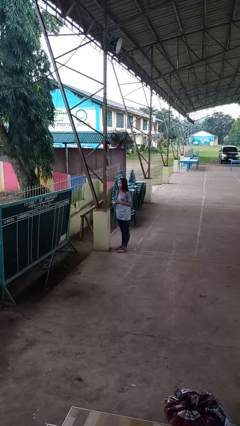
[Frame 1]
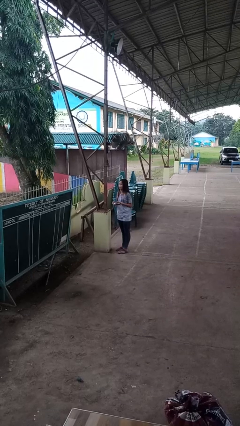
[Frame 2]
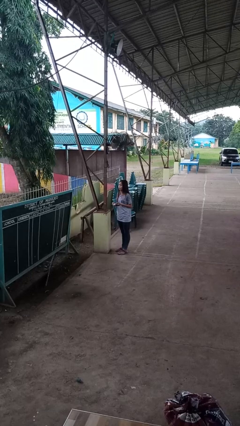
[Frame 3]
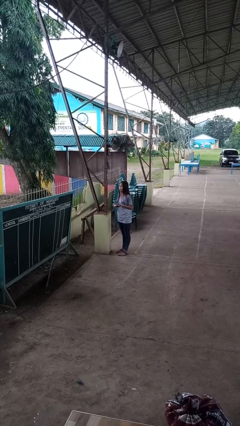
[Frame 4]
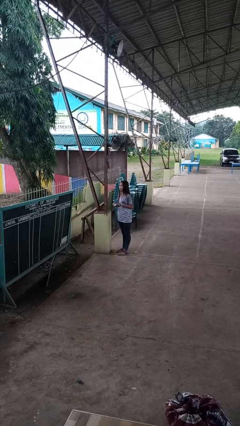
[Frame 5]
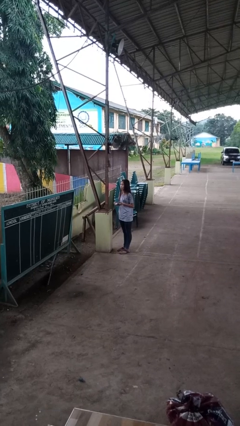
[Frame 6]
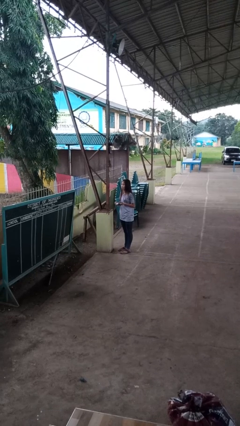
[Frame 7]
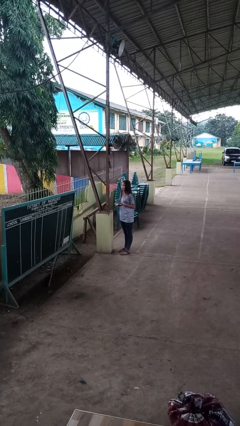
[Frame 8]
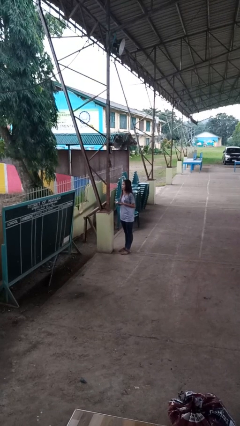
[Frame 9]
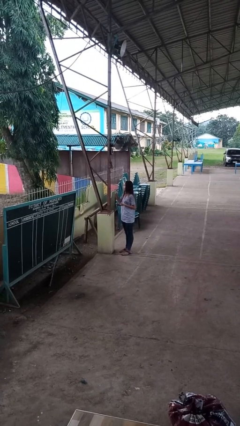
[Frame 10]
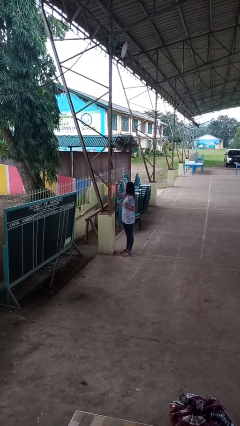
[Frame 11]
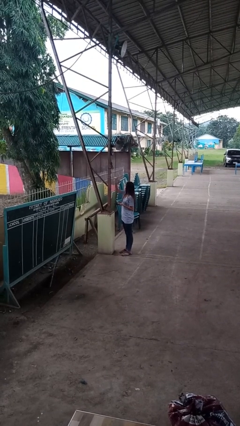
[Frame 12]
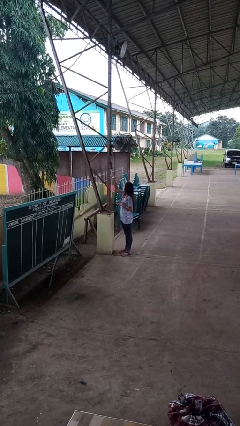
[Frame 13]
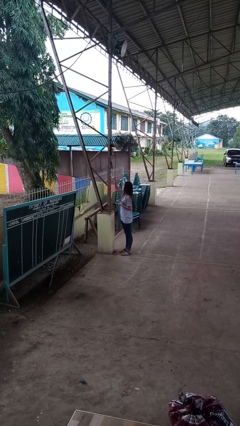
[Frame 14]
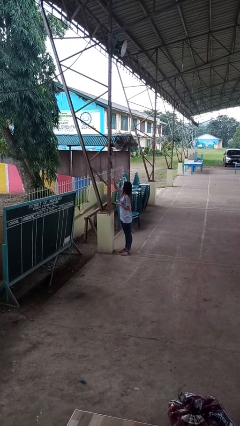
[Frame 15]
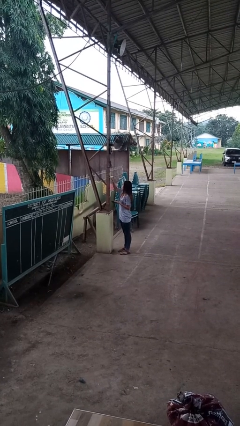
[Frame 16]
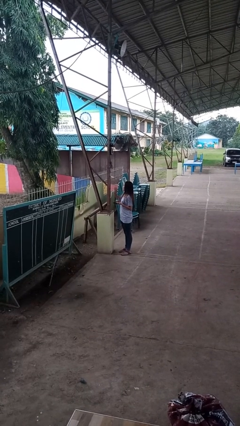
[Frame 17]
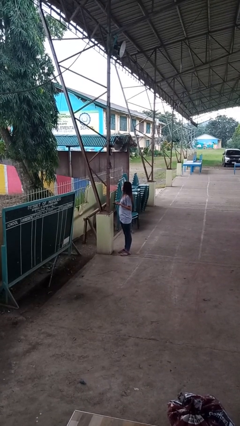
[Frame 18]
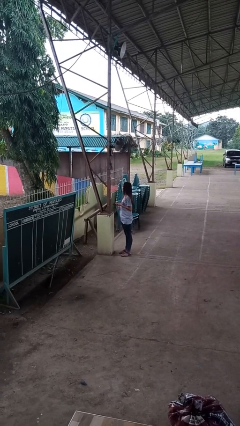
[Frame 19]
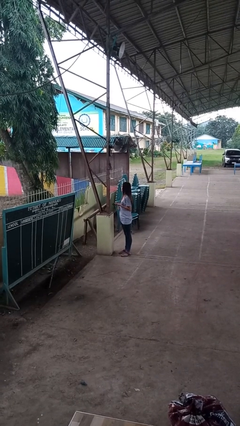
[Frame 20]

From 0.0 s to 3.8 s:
person plugs into electrical socket

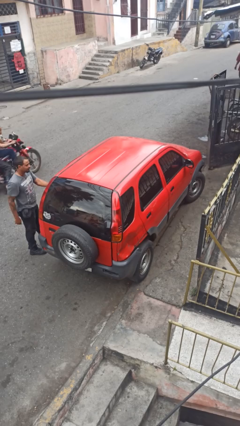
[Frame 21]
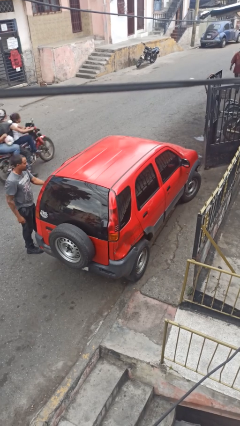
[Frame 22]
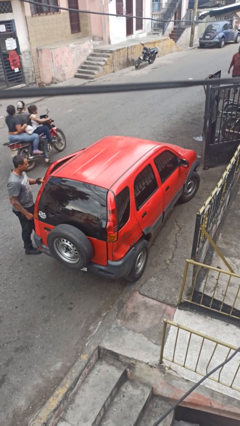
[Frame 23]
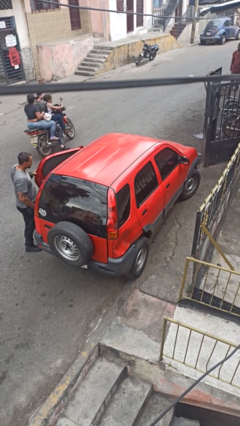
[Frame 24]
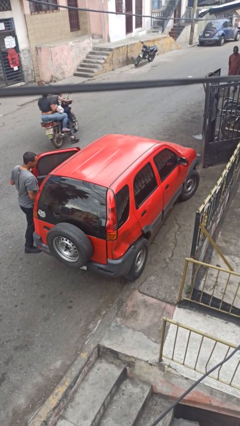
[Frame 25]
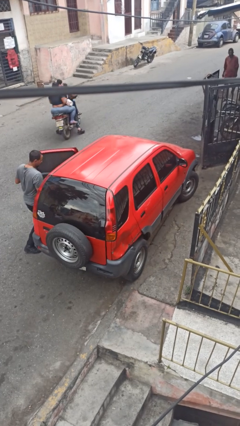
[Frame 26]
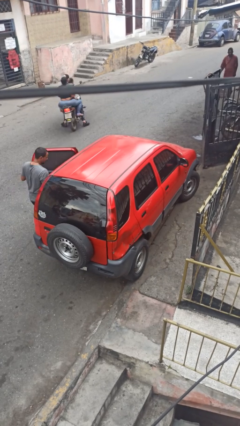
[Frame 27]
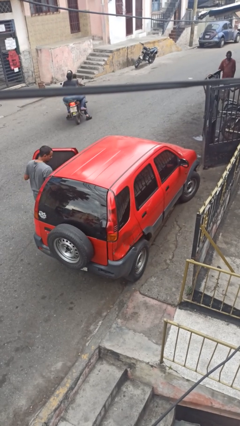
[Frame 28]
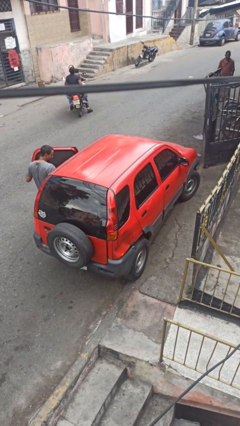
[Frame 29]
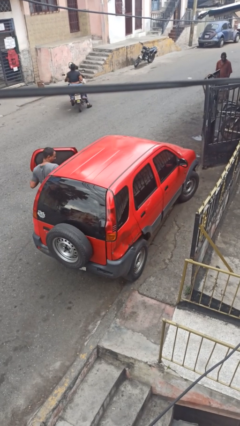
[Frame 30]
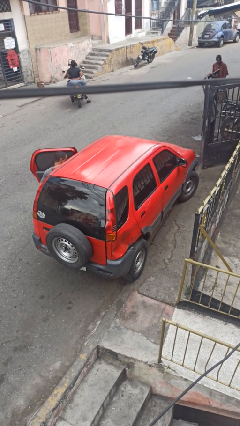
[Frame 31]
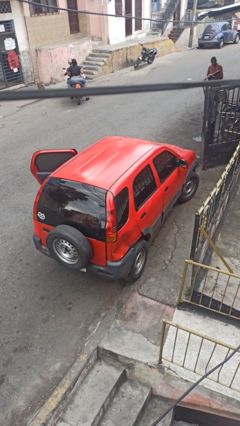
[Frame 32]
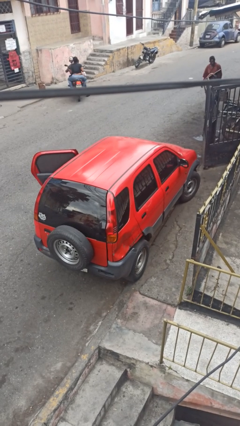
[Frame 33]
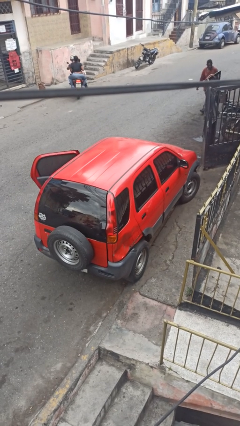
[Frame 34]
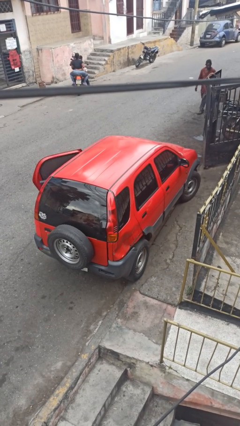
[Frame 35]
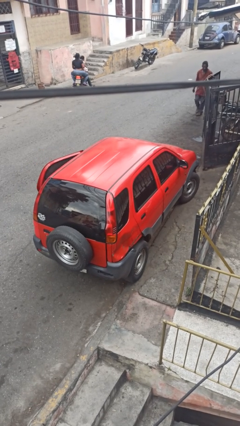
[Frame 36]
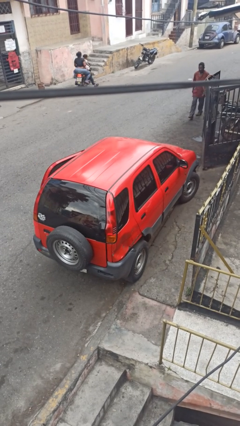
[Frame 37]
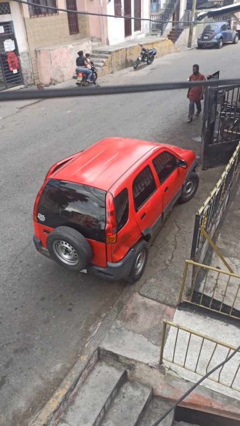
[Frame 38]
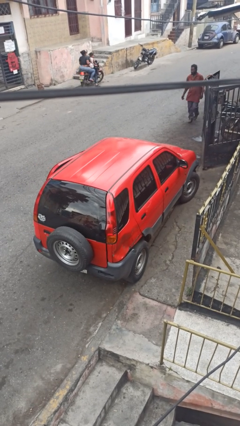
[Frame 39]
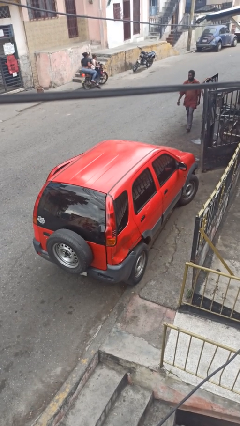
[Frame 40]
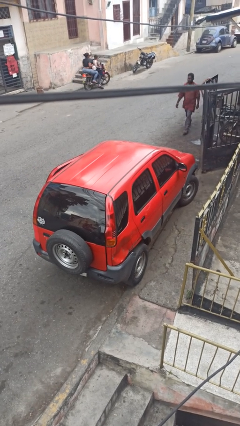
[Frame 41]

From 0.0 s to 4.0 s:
car picks up person

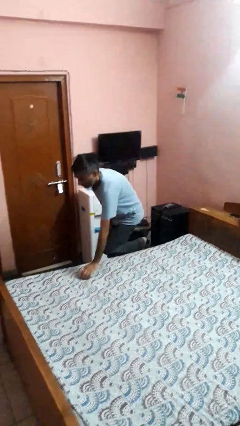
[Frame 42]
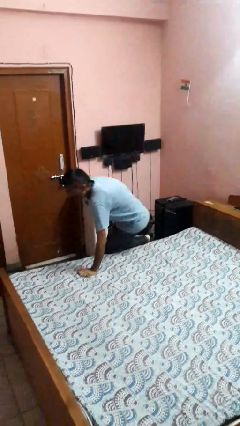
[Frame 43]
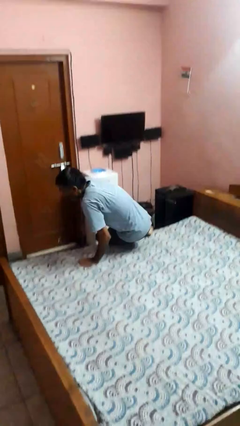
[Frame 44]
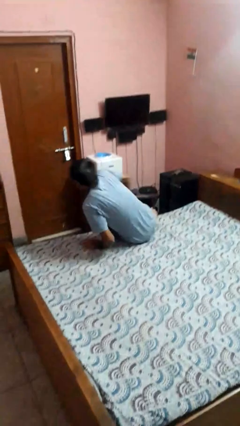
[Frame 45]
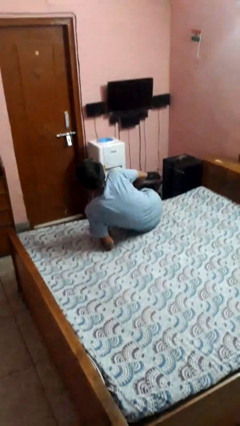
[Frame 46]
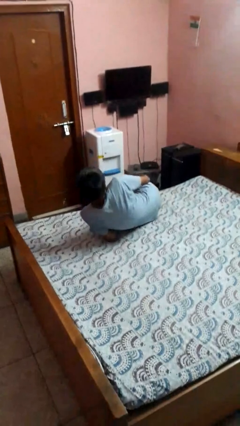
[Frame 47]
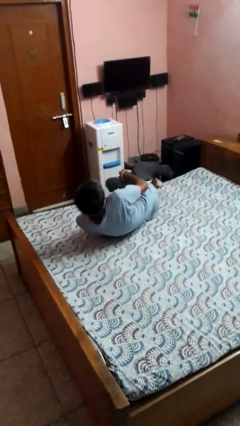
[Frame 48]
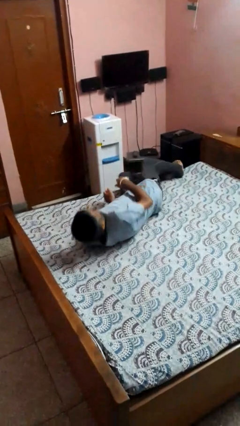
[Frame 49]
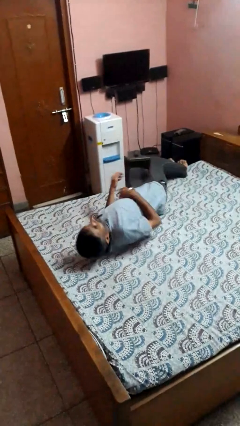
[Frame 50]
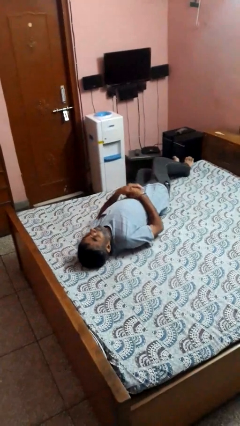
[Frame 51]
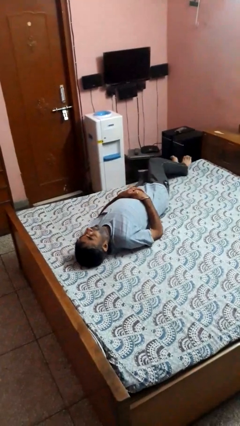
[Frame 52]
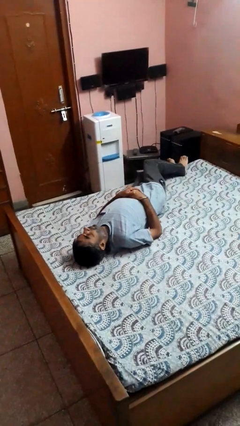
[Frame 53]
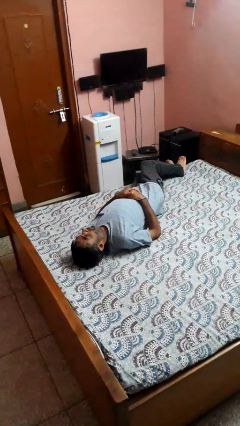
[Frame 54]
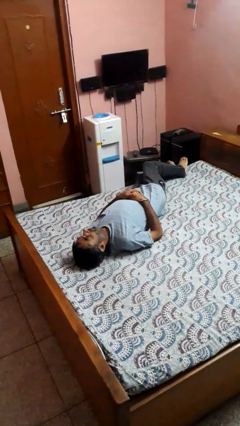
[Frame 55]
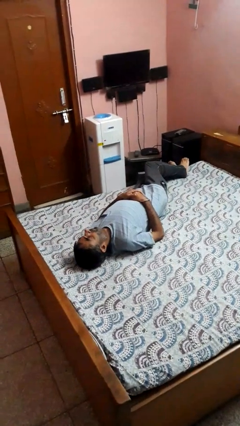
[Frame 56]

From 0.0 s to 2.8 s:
person lies down on bed

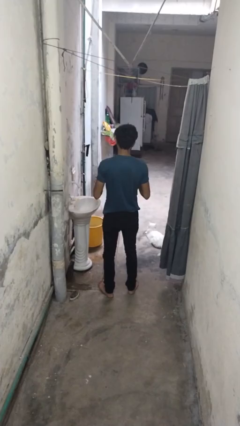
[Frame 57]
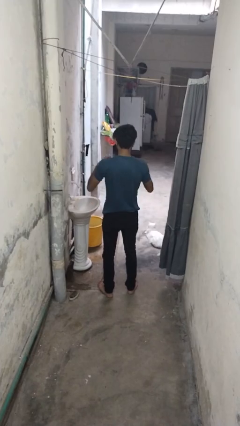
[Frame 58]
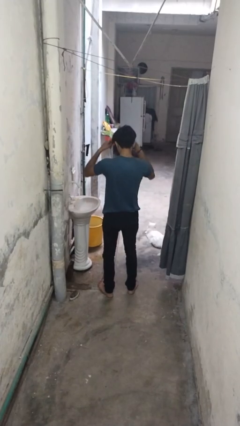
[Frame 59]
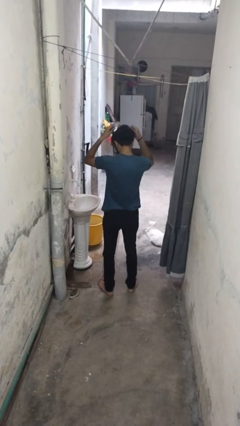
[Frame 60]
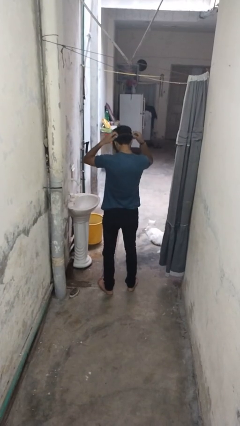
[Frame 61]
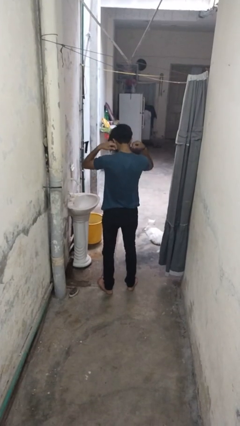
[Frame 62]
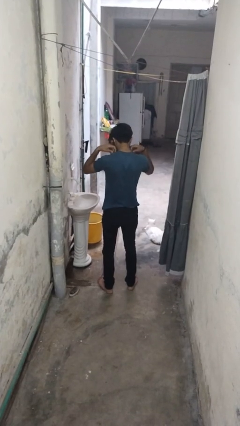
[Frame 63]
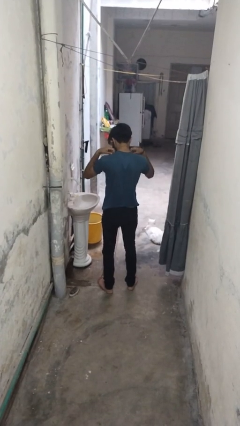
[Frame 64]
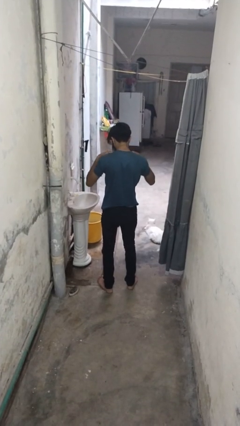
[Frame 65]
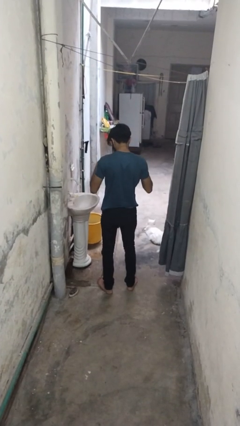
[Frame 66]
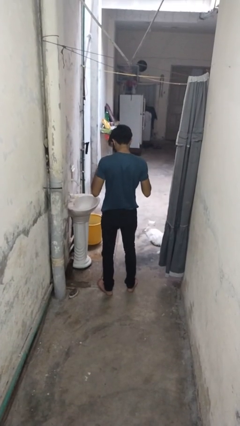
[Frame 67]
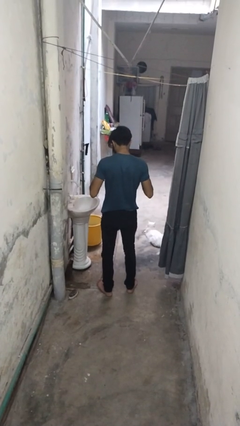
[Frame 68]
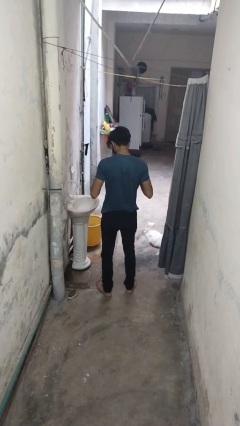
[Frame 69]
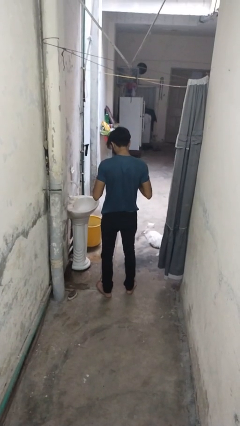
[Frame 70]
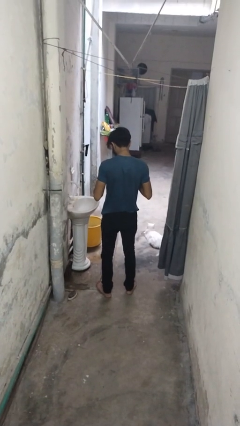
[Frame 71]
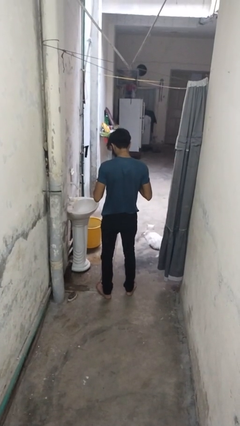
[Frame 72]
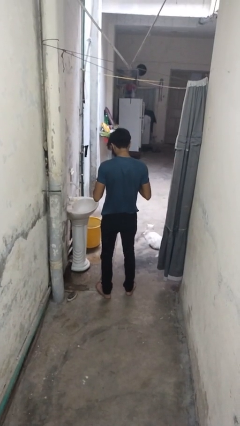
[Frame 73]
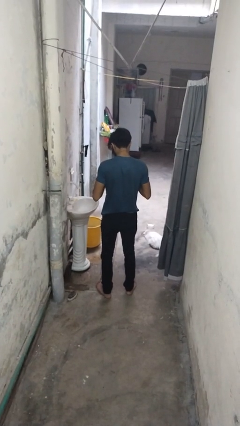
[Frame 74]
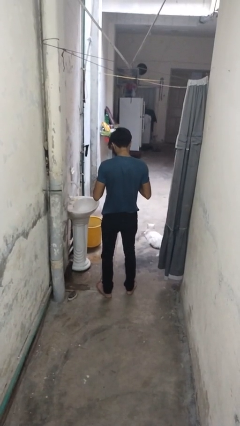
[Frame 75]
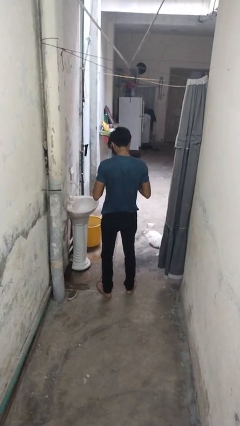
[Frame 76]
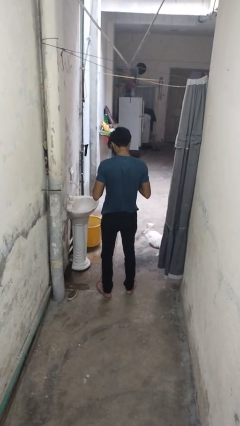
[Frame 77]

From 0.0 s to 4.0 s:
person puts on necklace

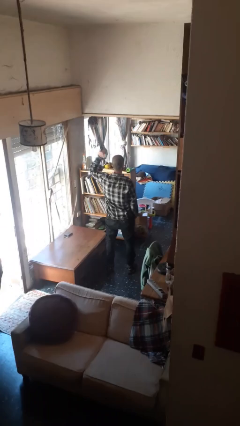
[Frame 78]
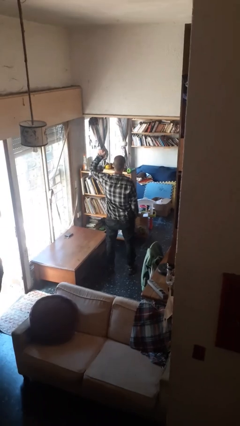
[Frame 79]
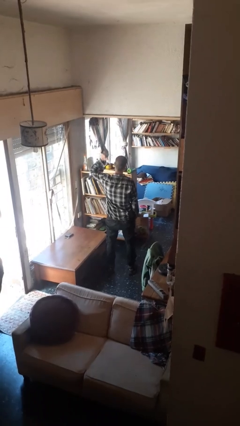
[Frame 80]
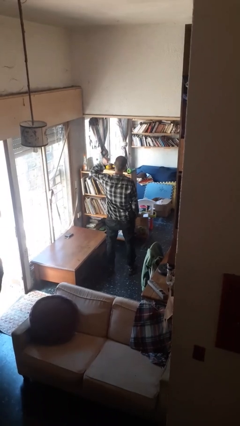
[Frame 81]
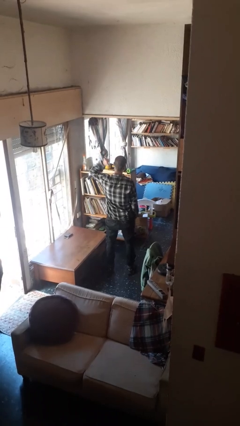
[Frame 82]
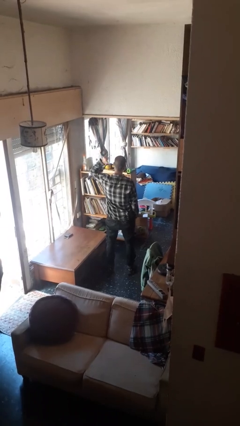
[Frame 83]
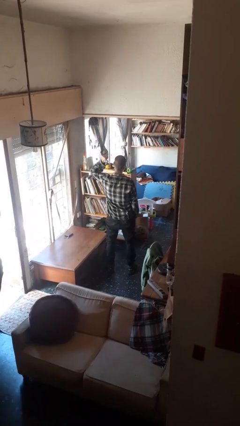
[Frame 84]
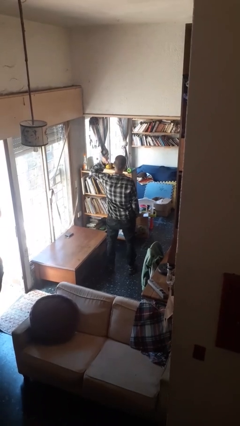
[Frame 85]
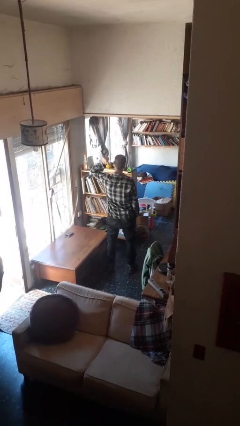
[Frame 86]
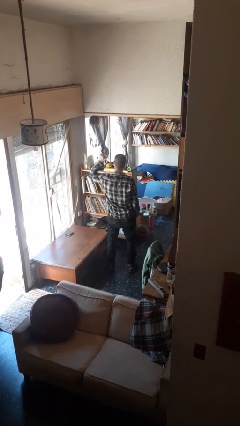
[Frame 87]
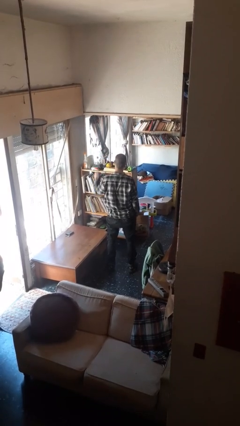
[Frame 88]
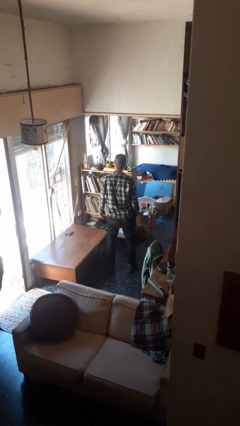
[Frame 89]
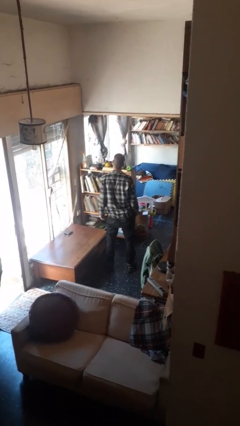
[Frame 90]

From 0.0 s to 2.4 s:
person gestures behind me

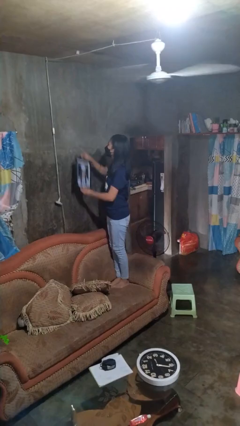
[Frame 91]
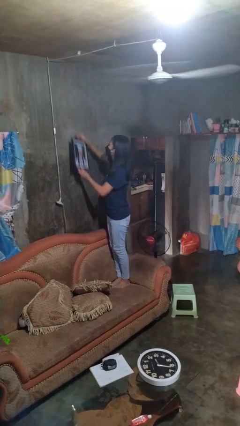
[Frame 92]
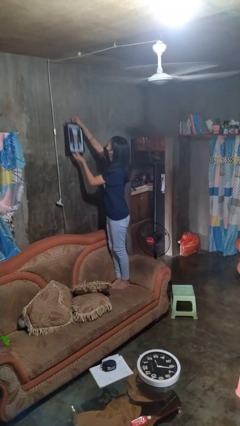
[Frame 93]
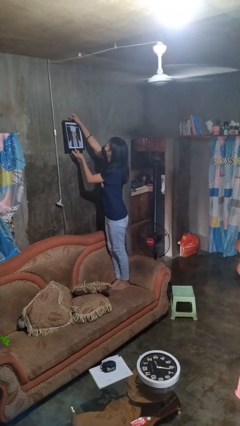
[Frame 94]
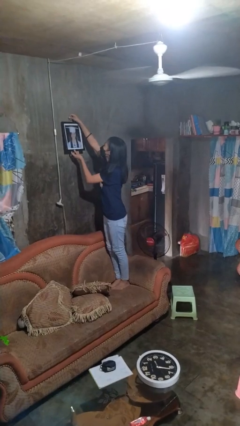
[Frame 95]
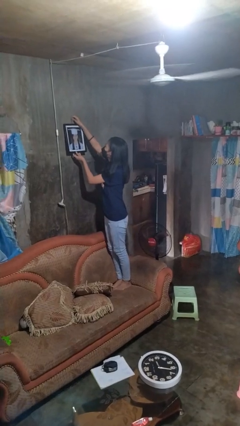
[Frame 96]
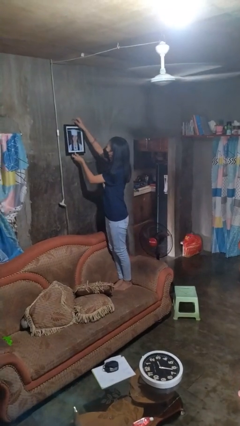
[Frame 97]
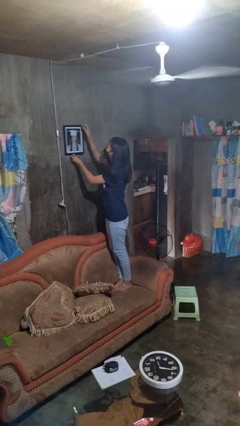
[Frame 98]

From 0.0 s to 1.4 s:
person puts up picture frame
